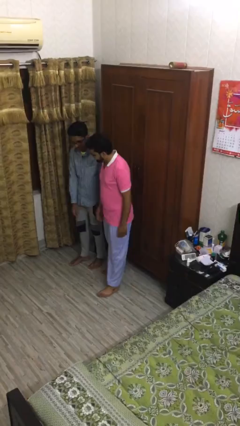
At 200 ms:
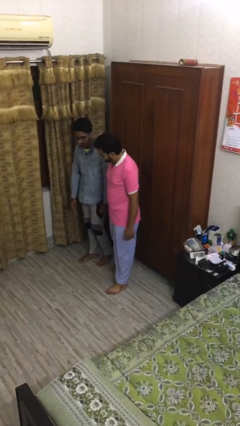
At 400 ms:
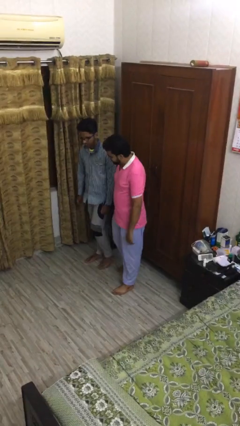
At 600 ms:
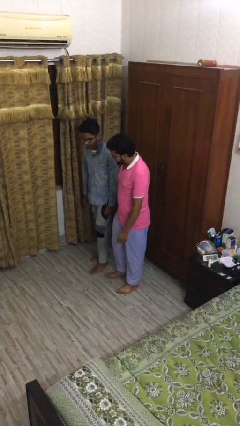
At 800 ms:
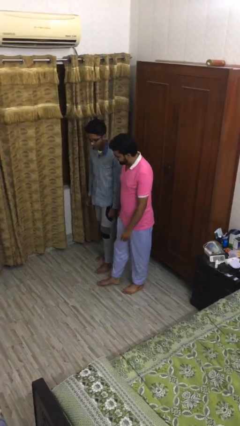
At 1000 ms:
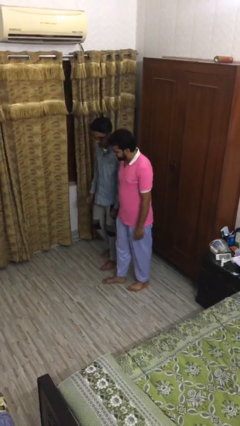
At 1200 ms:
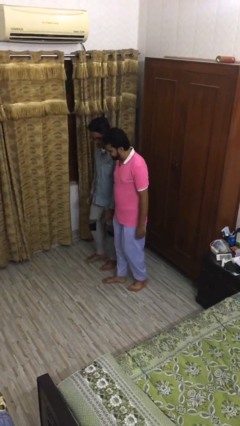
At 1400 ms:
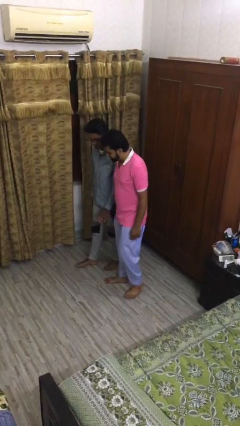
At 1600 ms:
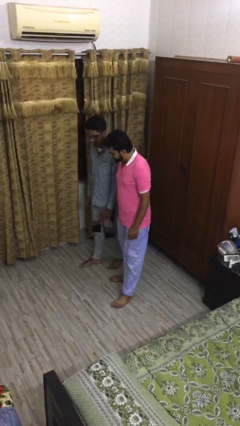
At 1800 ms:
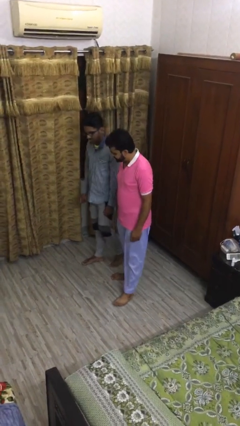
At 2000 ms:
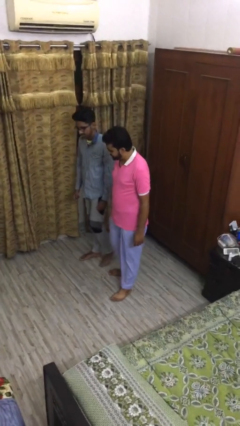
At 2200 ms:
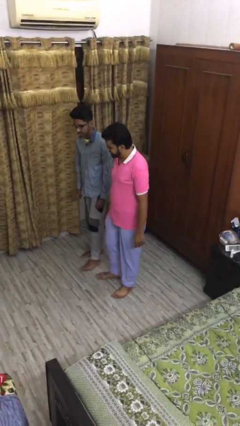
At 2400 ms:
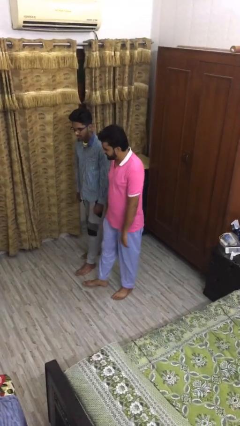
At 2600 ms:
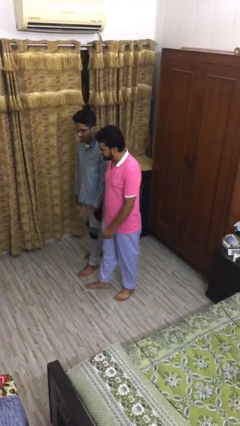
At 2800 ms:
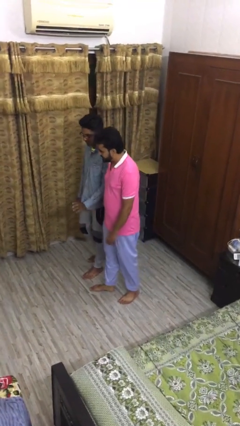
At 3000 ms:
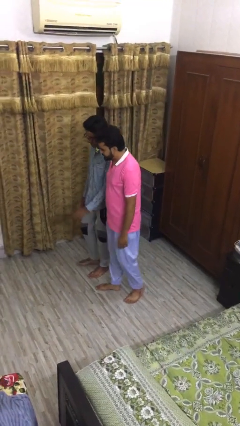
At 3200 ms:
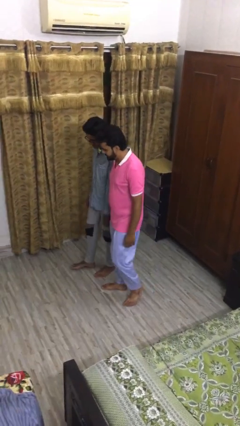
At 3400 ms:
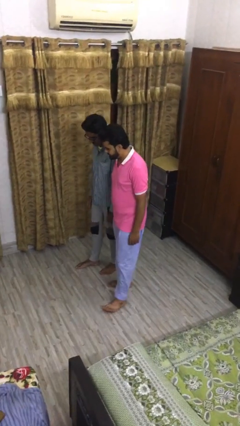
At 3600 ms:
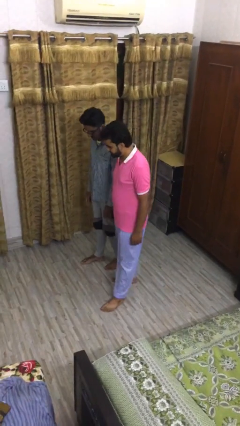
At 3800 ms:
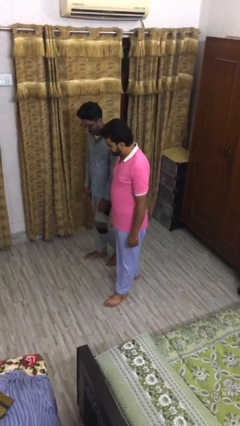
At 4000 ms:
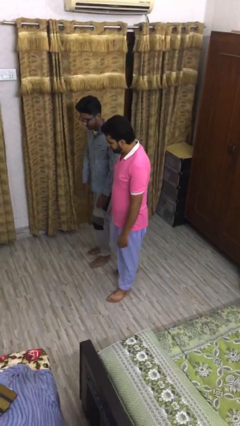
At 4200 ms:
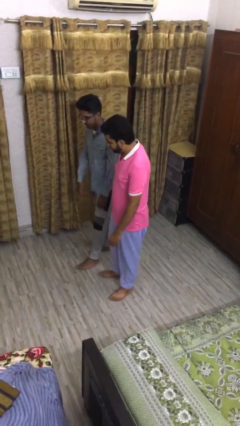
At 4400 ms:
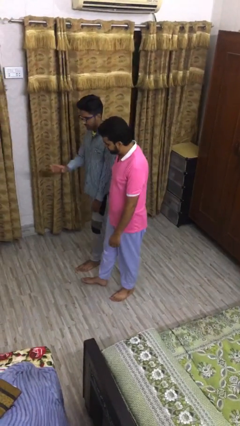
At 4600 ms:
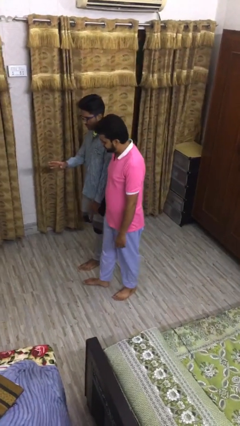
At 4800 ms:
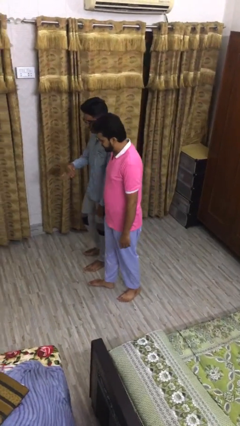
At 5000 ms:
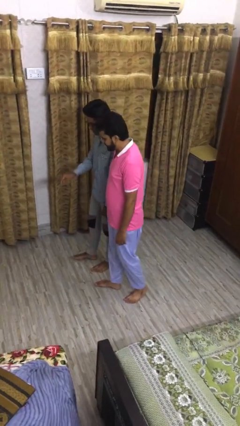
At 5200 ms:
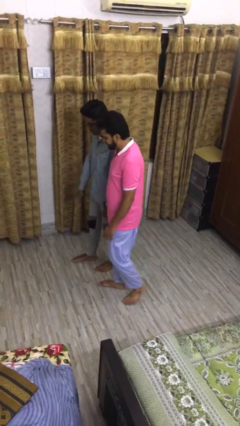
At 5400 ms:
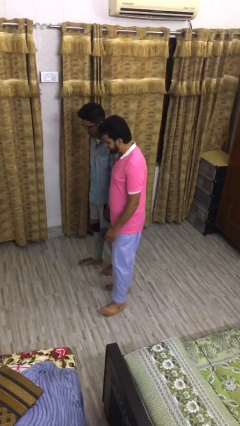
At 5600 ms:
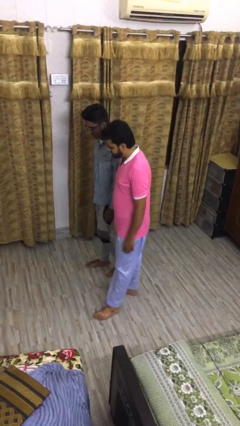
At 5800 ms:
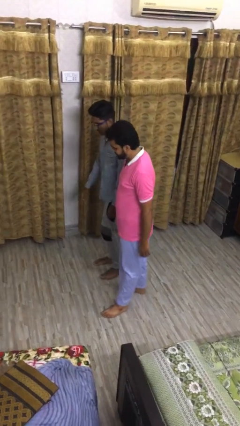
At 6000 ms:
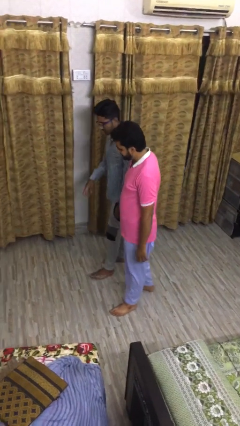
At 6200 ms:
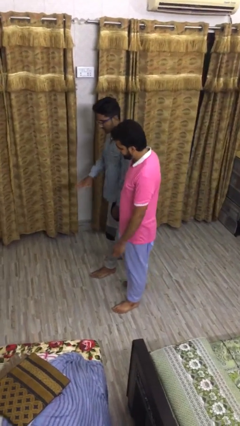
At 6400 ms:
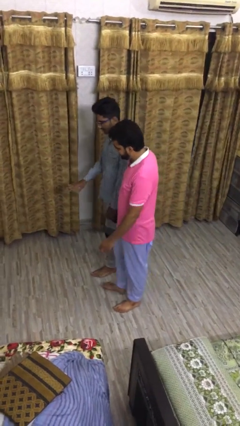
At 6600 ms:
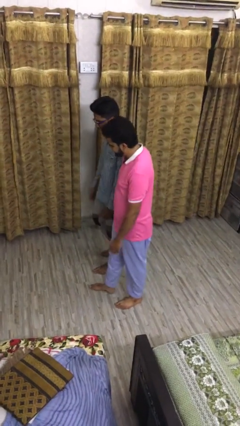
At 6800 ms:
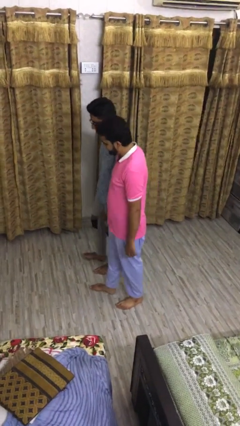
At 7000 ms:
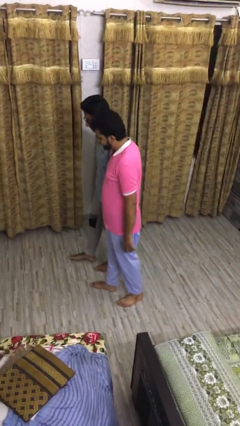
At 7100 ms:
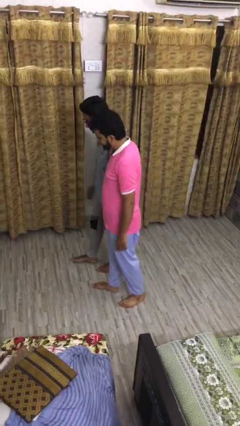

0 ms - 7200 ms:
person talks to person

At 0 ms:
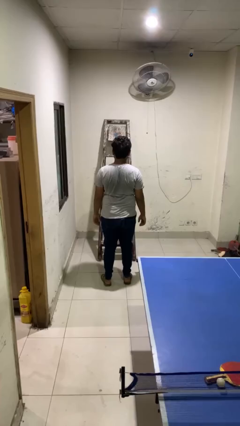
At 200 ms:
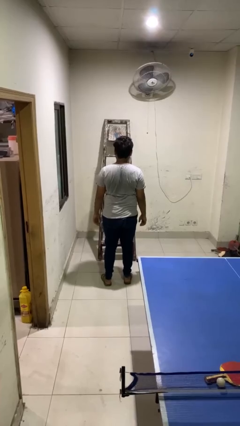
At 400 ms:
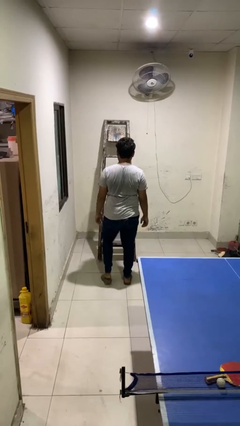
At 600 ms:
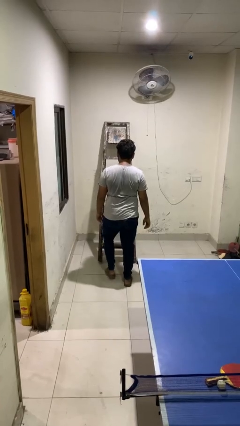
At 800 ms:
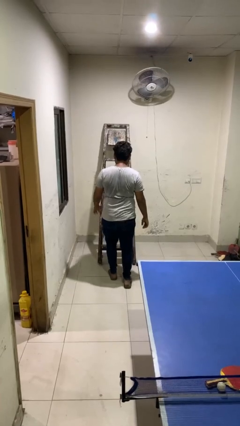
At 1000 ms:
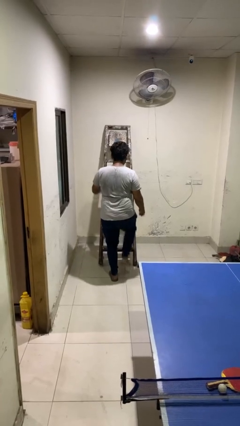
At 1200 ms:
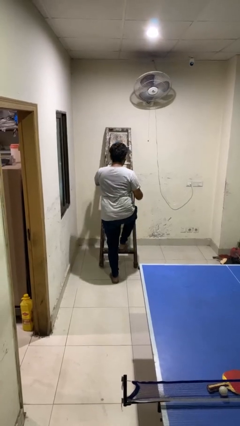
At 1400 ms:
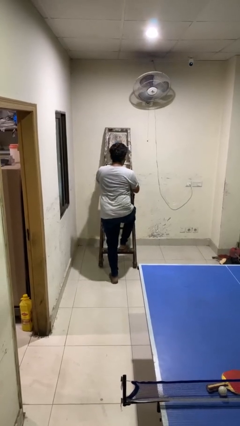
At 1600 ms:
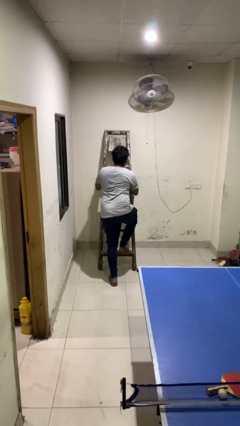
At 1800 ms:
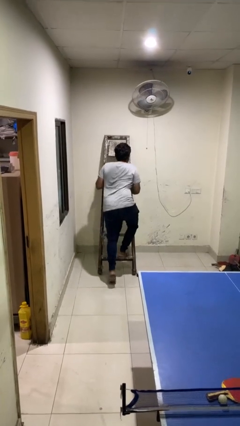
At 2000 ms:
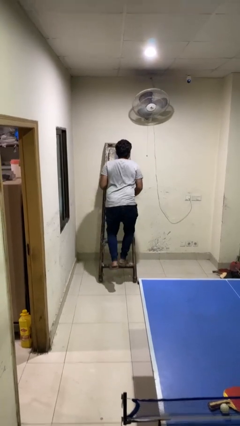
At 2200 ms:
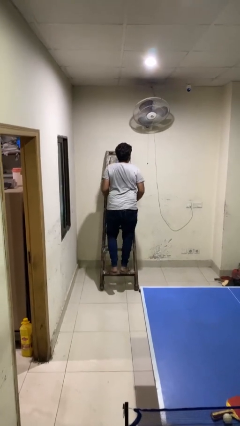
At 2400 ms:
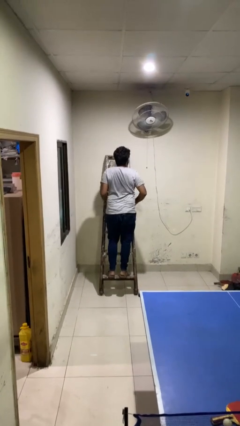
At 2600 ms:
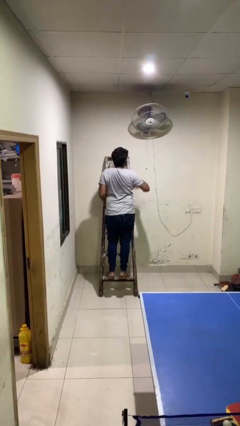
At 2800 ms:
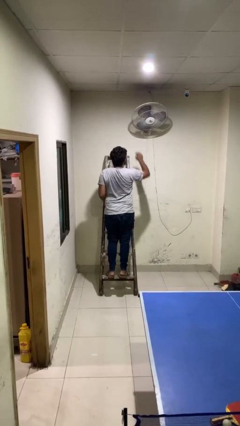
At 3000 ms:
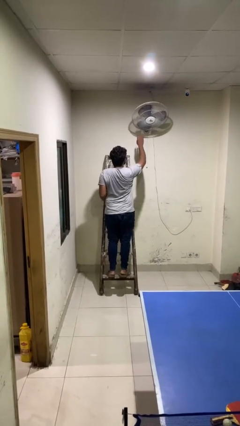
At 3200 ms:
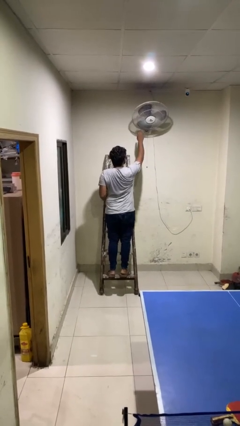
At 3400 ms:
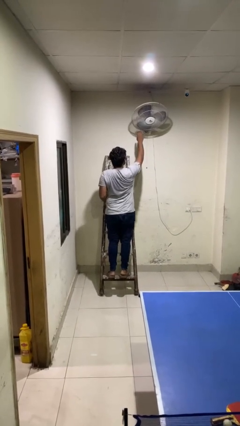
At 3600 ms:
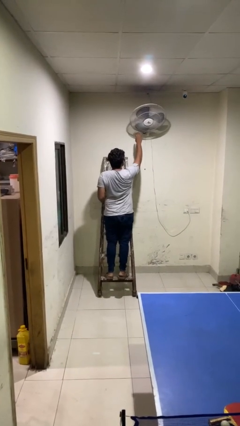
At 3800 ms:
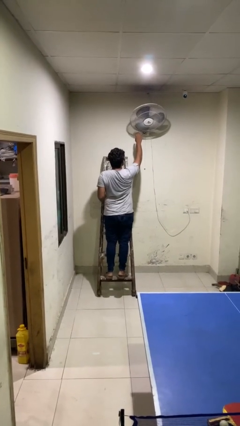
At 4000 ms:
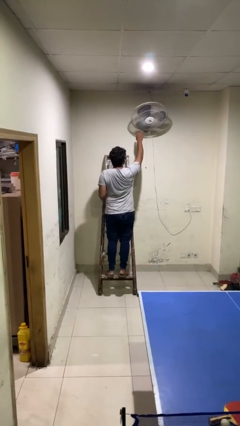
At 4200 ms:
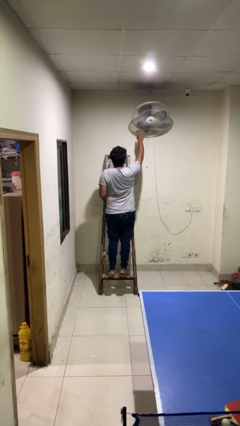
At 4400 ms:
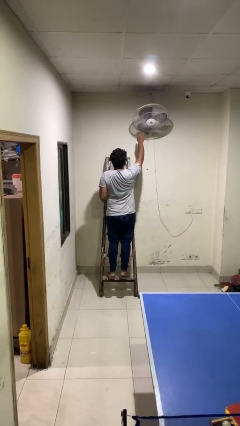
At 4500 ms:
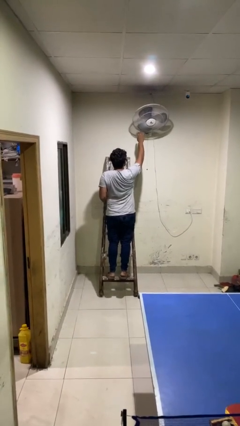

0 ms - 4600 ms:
person climbs up ladder

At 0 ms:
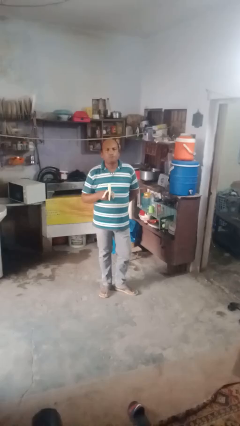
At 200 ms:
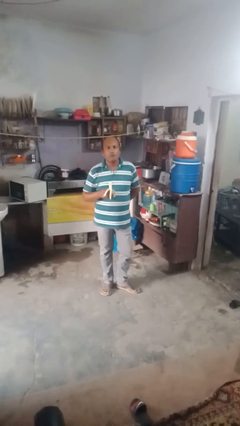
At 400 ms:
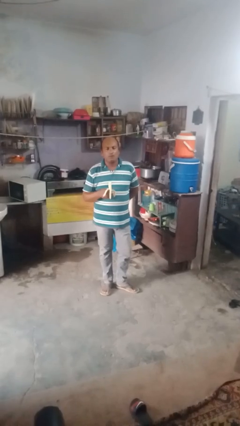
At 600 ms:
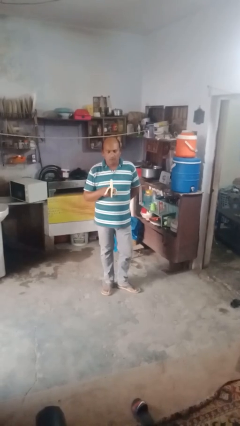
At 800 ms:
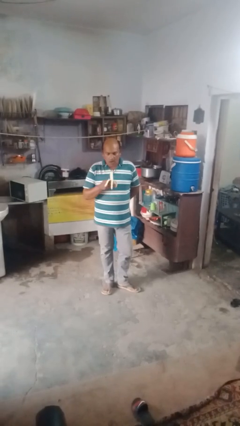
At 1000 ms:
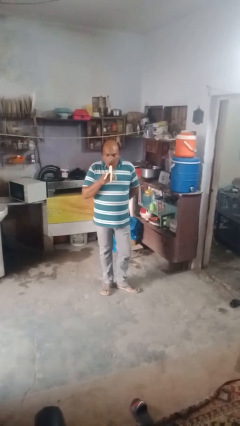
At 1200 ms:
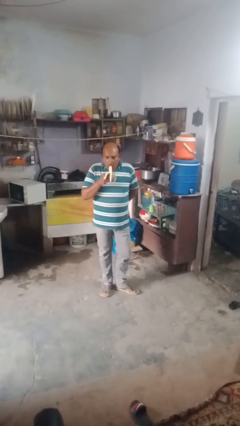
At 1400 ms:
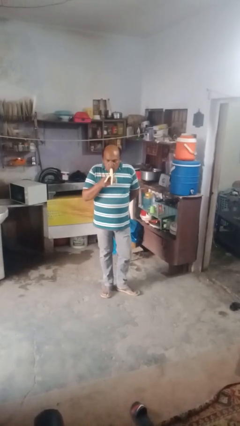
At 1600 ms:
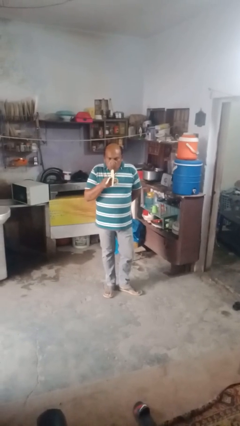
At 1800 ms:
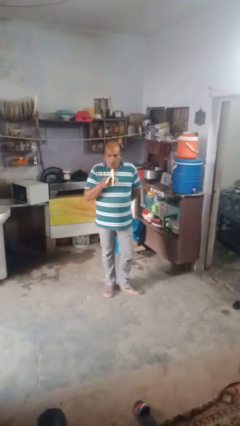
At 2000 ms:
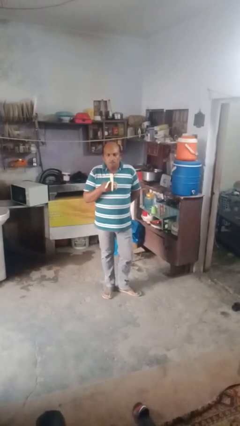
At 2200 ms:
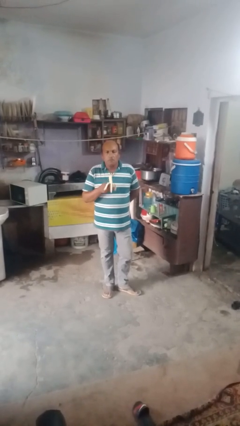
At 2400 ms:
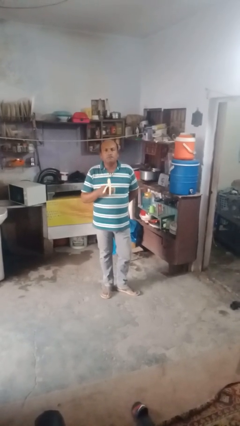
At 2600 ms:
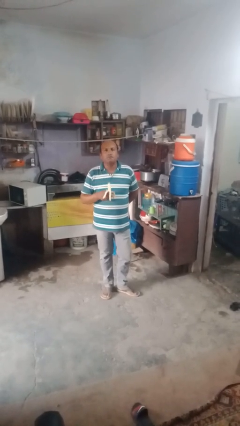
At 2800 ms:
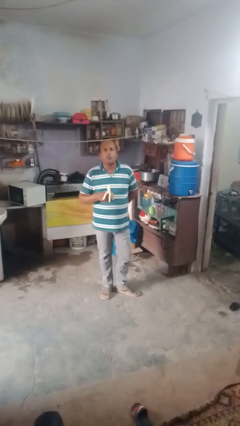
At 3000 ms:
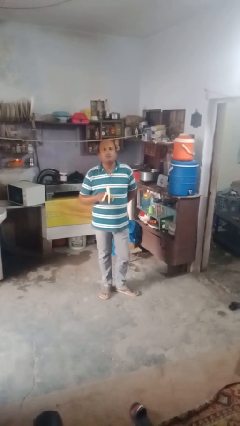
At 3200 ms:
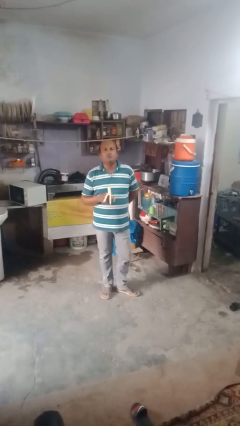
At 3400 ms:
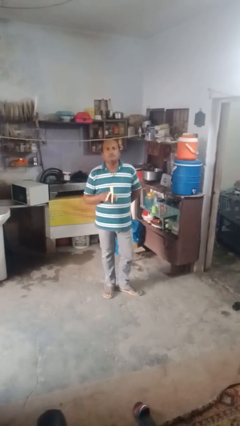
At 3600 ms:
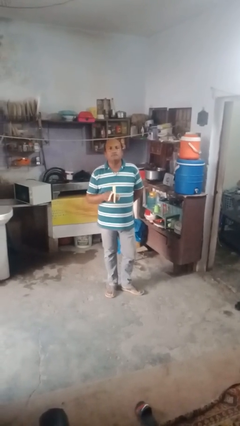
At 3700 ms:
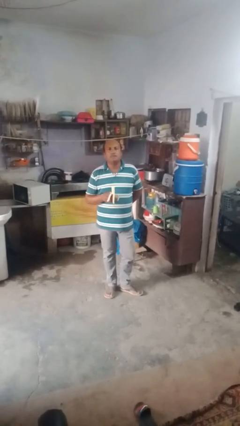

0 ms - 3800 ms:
person eats banana

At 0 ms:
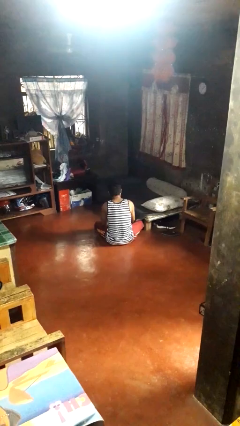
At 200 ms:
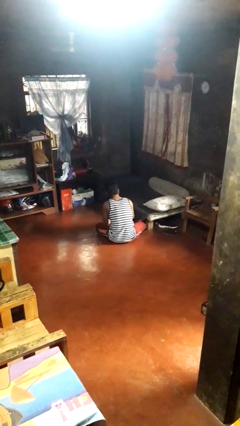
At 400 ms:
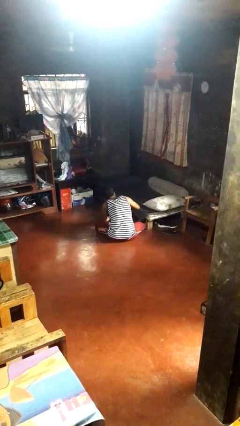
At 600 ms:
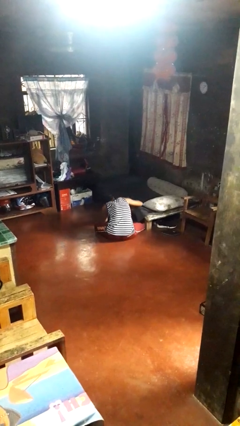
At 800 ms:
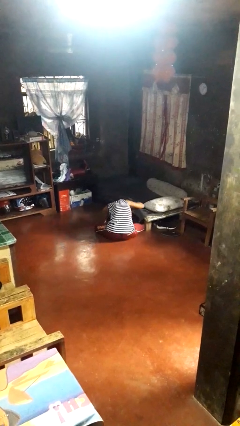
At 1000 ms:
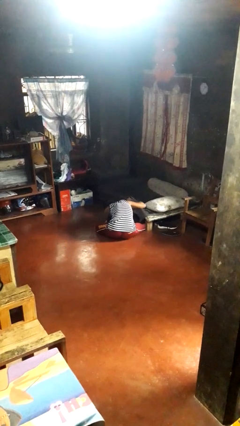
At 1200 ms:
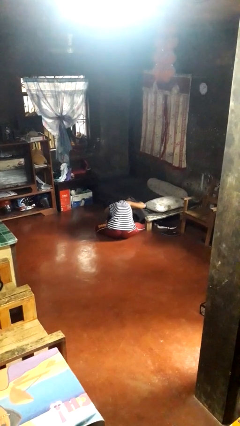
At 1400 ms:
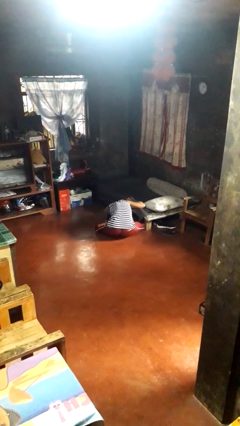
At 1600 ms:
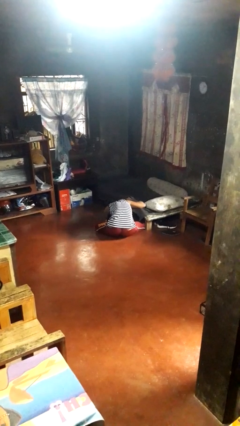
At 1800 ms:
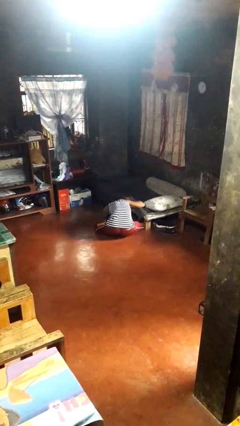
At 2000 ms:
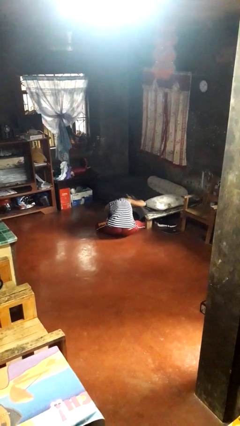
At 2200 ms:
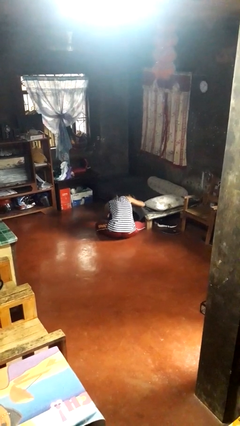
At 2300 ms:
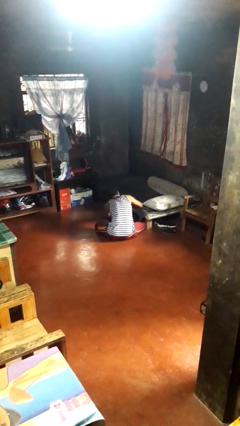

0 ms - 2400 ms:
person searches under bed

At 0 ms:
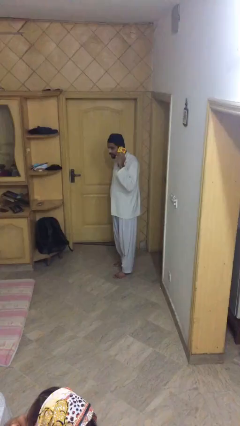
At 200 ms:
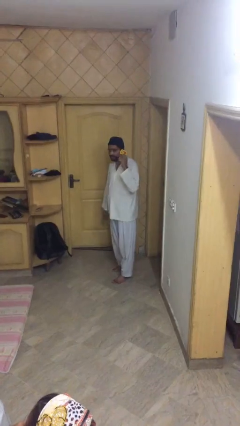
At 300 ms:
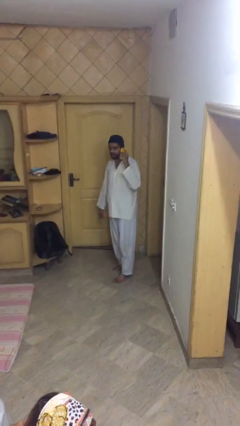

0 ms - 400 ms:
person opens facility door
